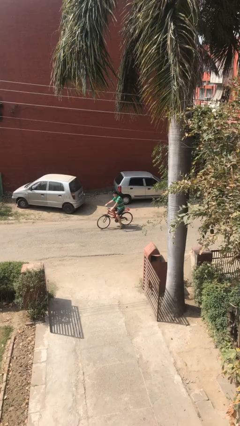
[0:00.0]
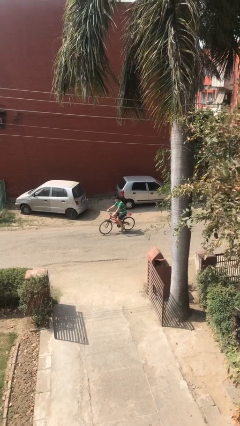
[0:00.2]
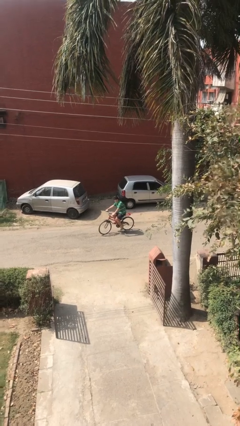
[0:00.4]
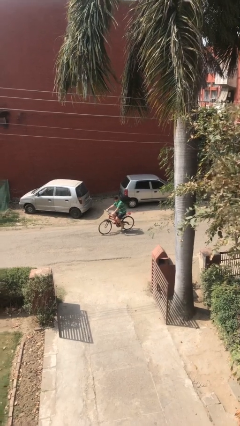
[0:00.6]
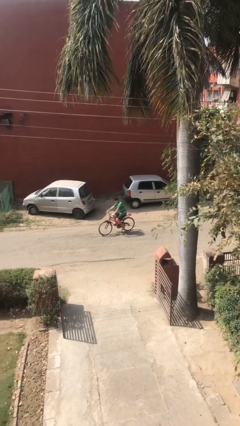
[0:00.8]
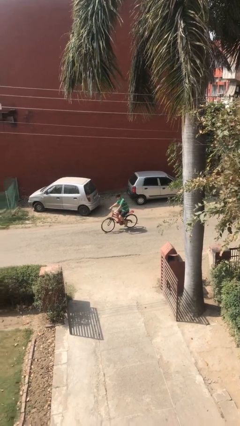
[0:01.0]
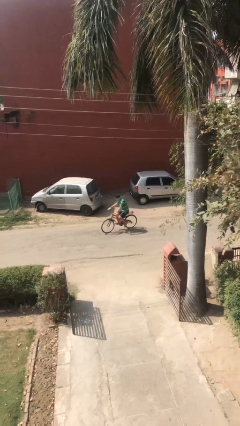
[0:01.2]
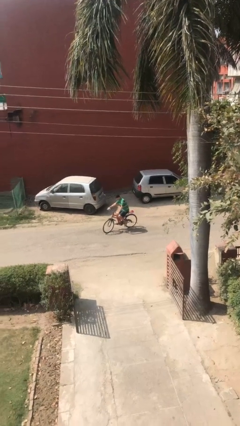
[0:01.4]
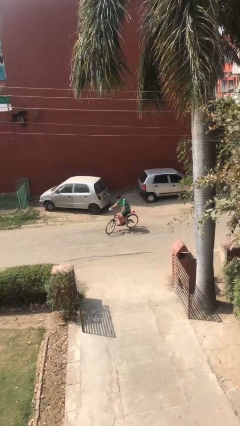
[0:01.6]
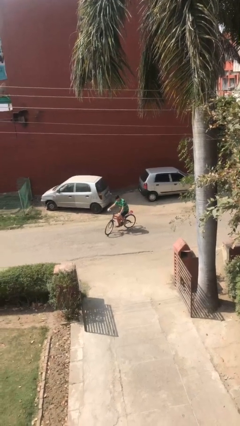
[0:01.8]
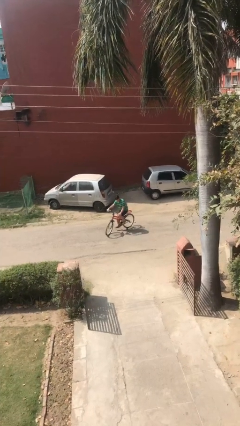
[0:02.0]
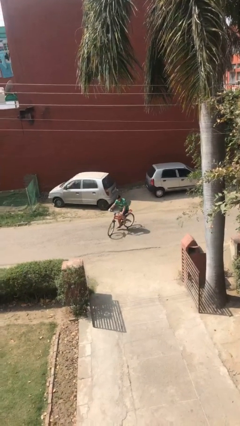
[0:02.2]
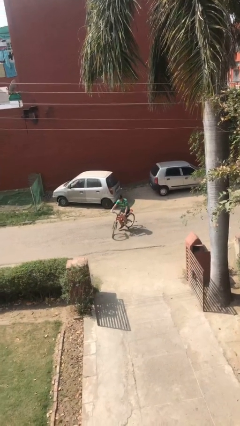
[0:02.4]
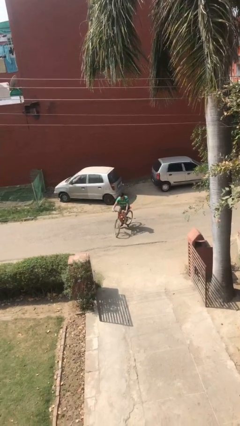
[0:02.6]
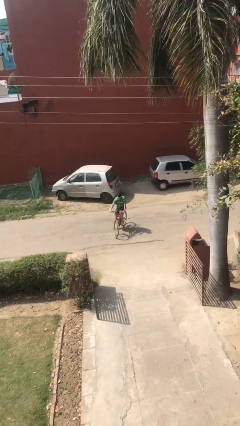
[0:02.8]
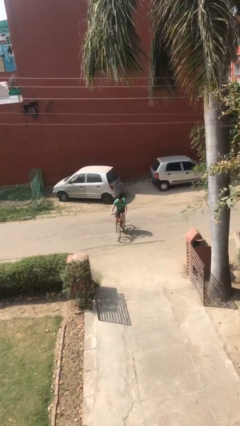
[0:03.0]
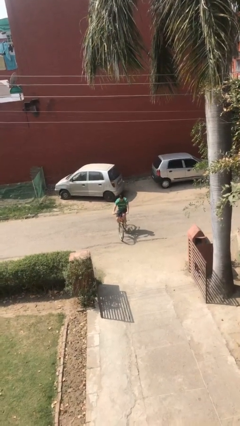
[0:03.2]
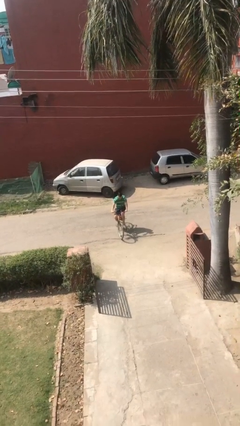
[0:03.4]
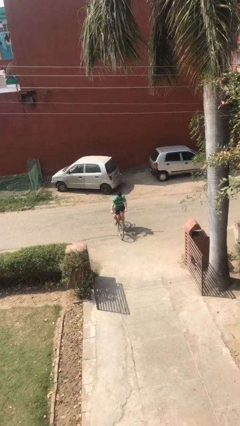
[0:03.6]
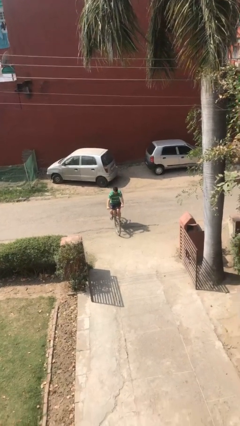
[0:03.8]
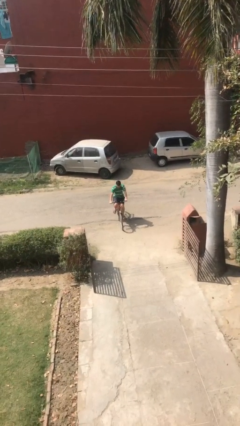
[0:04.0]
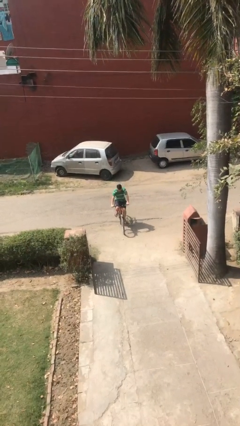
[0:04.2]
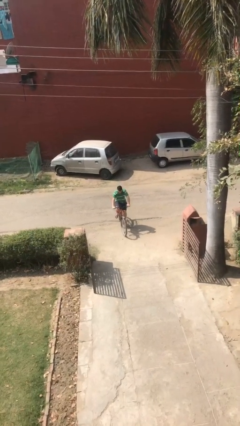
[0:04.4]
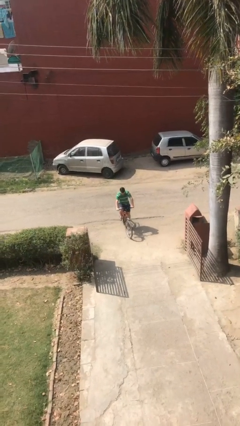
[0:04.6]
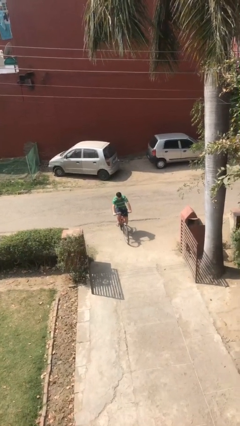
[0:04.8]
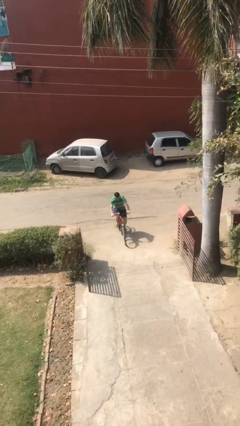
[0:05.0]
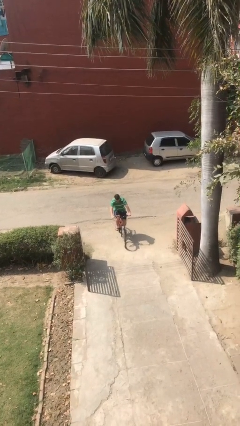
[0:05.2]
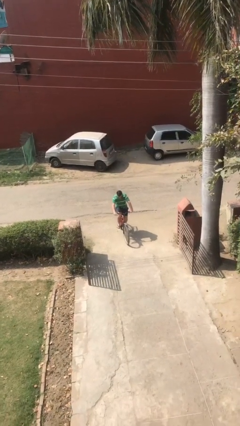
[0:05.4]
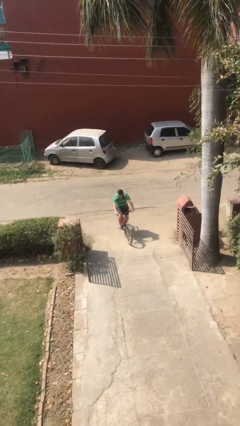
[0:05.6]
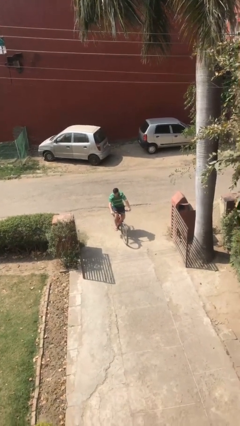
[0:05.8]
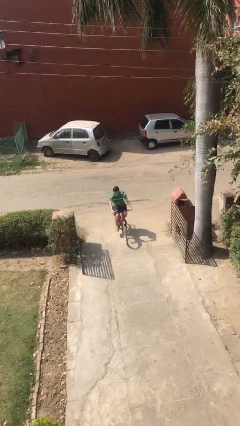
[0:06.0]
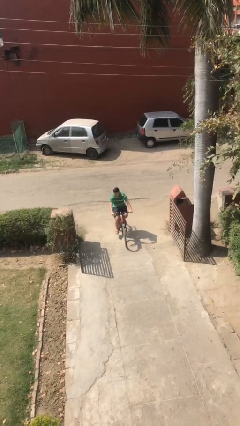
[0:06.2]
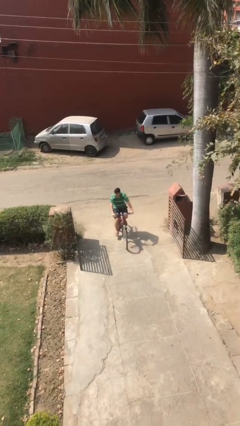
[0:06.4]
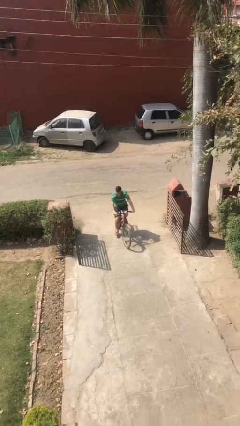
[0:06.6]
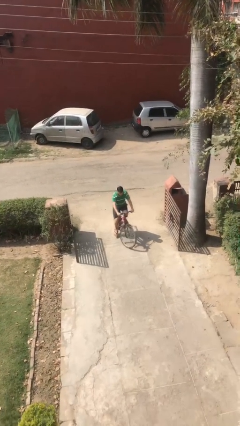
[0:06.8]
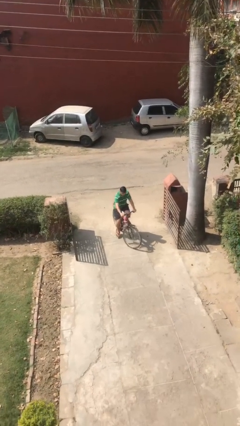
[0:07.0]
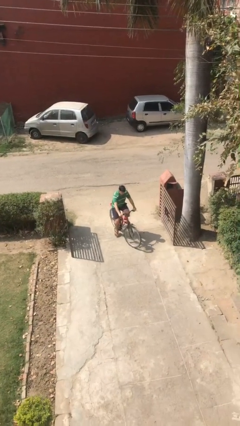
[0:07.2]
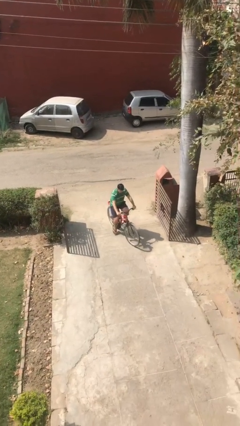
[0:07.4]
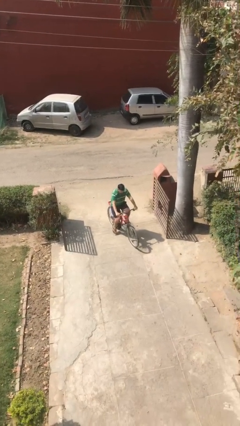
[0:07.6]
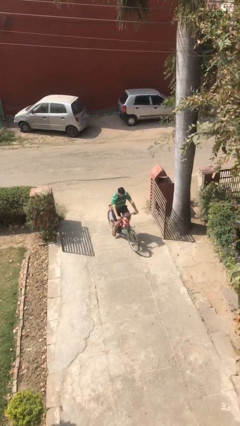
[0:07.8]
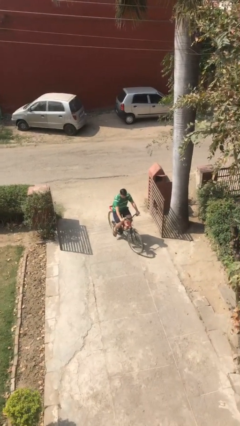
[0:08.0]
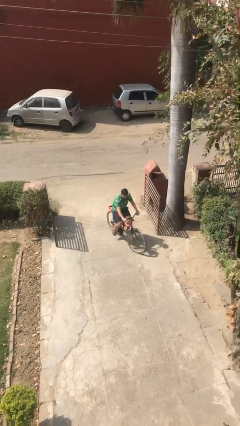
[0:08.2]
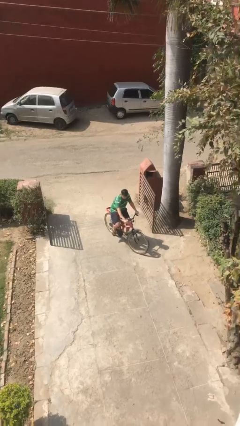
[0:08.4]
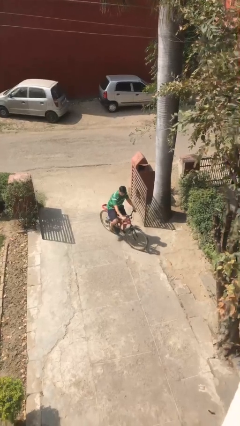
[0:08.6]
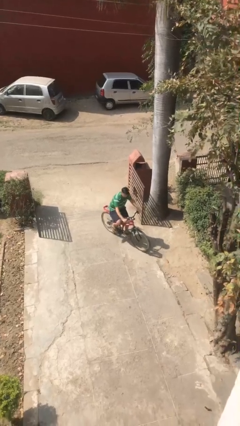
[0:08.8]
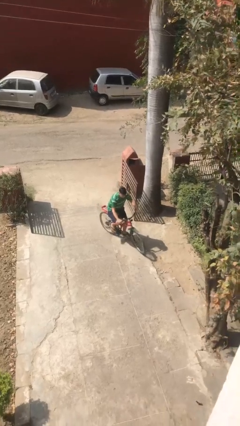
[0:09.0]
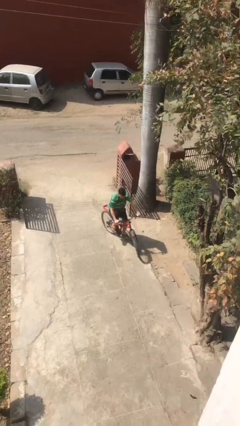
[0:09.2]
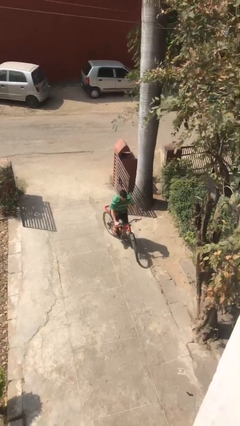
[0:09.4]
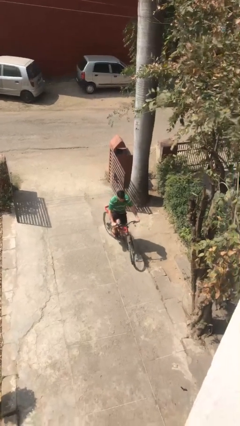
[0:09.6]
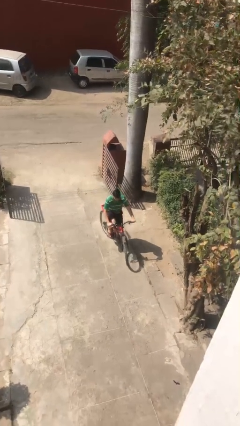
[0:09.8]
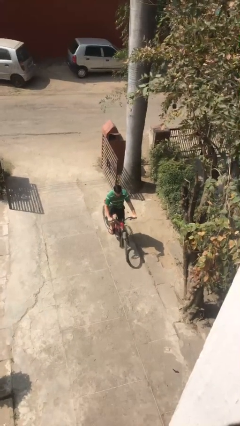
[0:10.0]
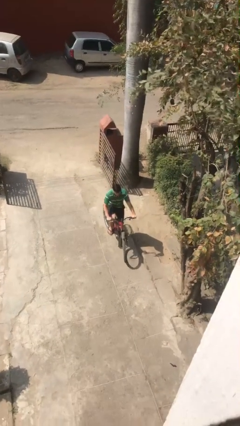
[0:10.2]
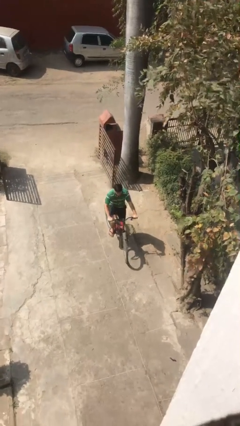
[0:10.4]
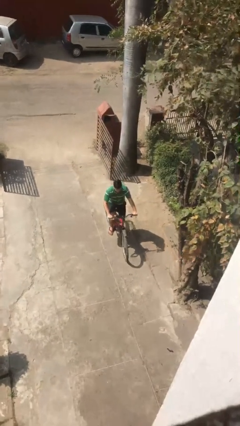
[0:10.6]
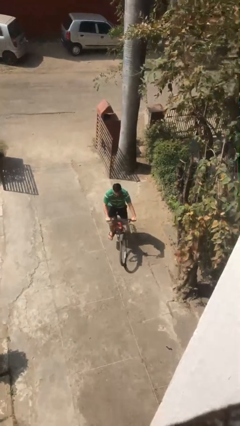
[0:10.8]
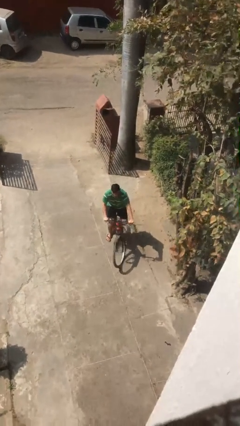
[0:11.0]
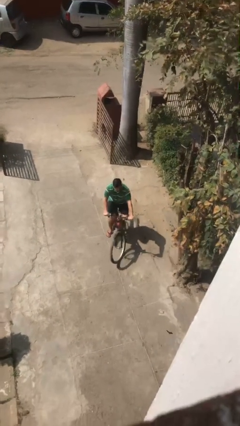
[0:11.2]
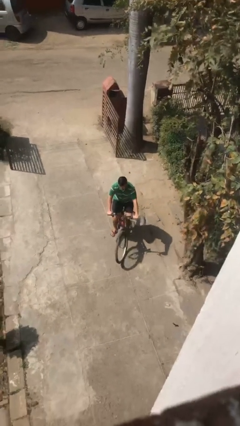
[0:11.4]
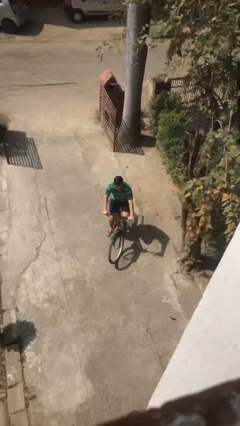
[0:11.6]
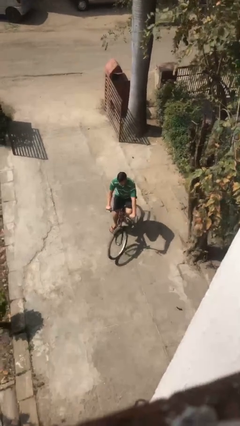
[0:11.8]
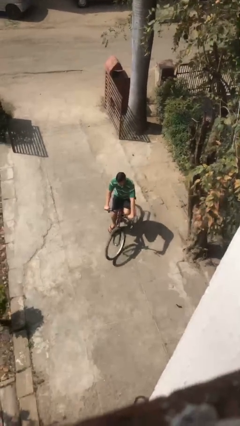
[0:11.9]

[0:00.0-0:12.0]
person rides bicycle

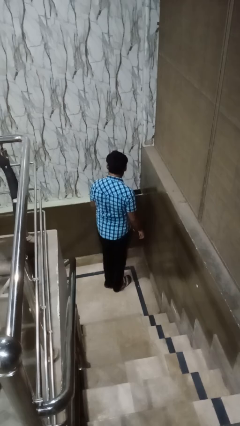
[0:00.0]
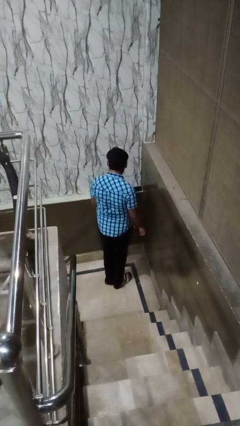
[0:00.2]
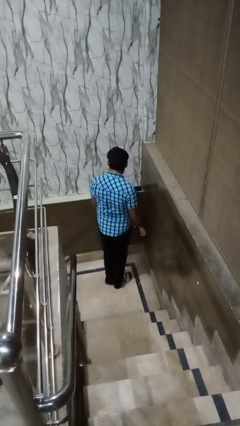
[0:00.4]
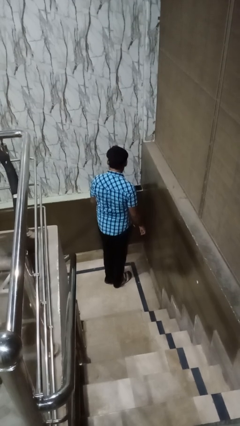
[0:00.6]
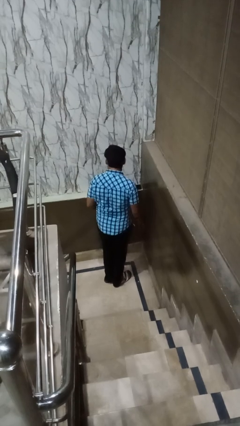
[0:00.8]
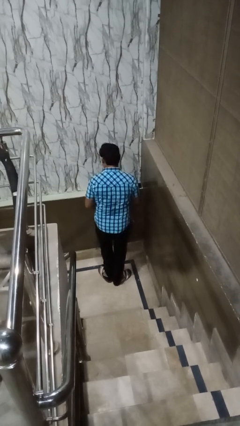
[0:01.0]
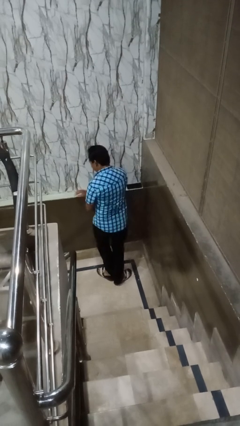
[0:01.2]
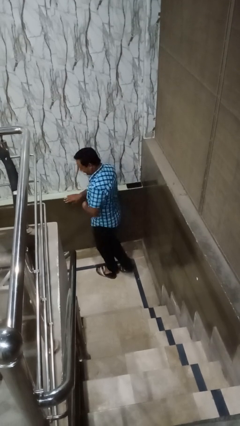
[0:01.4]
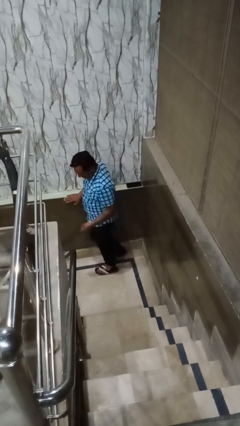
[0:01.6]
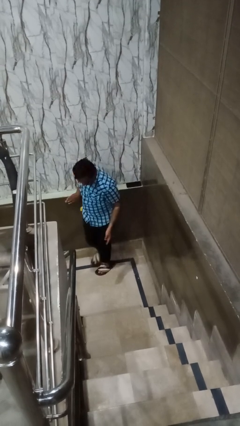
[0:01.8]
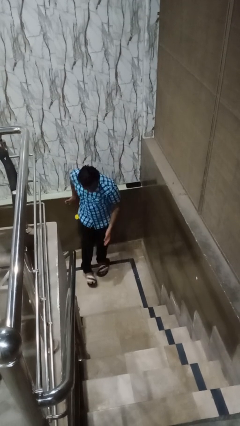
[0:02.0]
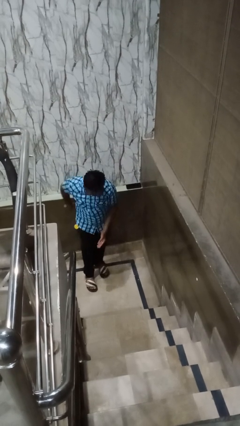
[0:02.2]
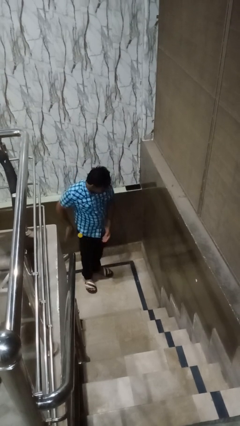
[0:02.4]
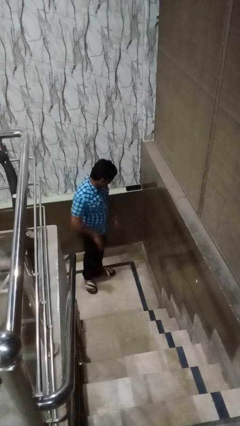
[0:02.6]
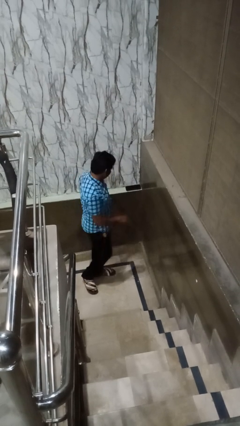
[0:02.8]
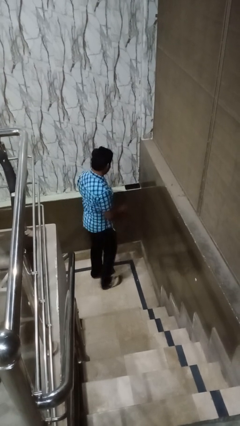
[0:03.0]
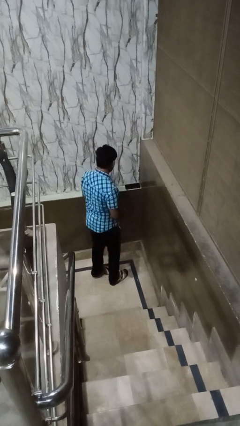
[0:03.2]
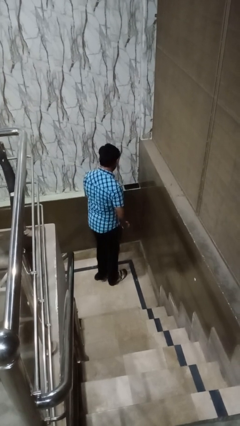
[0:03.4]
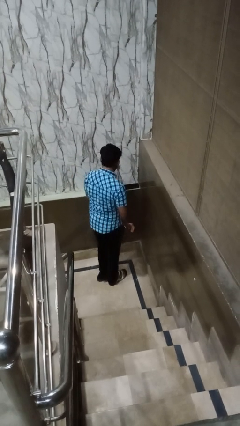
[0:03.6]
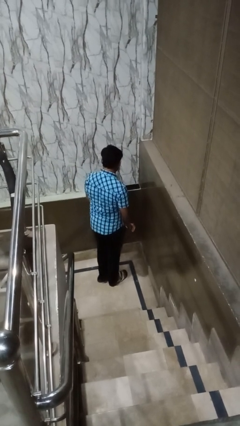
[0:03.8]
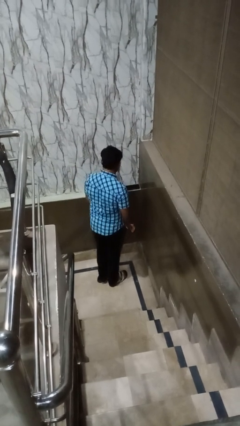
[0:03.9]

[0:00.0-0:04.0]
person twirls

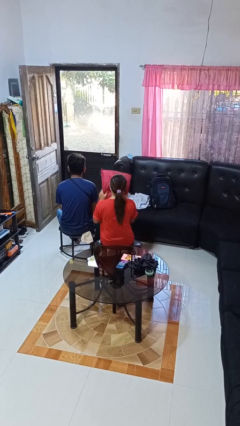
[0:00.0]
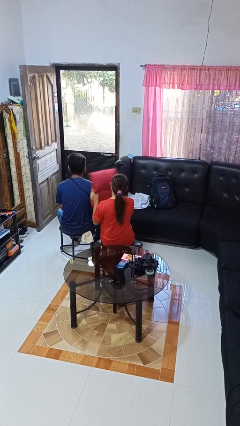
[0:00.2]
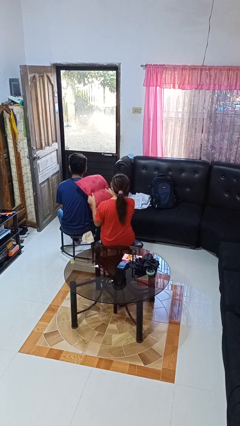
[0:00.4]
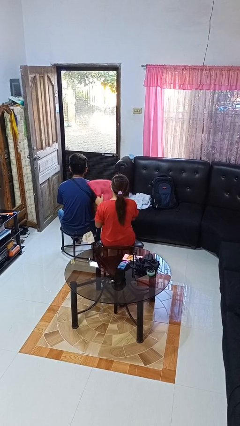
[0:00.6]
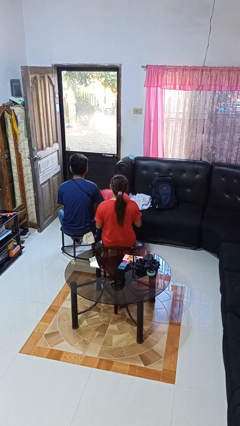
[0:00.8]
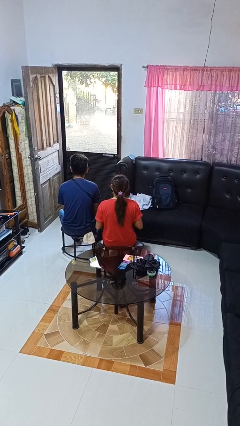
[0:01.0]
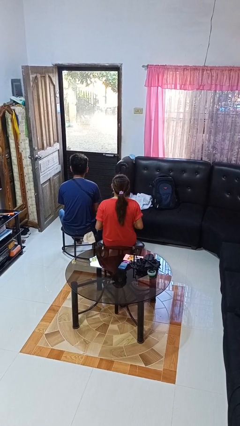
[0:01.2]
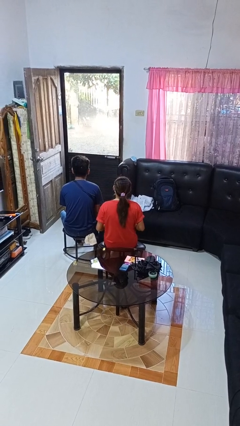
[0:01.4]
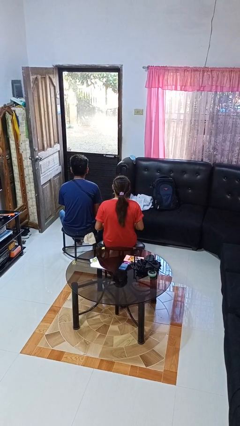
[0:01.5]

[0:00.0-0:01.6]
person hits person with pillow

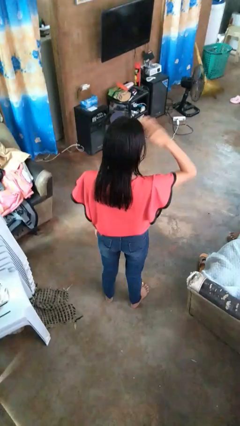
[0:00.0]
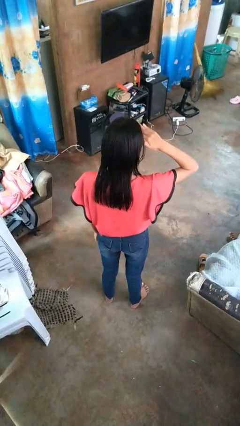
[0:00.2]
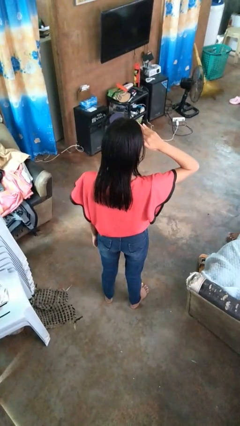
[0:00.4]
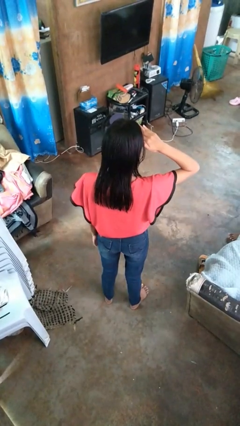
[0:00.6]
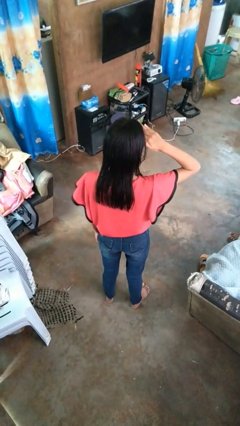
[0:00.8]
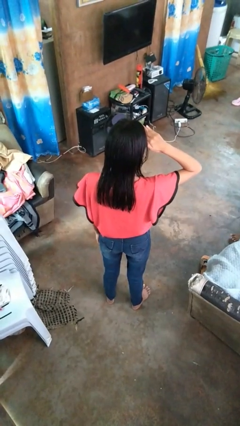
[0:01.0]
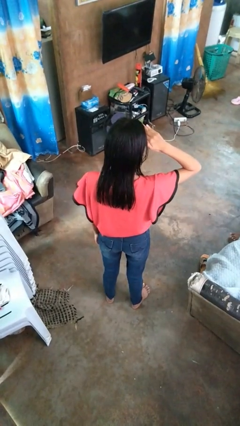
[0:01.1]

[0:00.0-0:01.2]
person salutes
